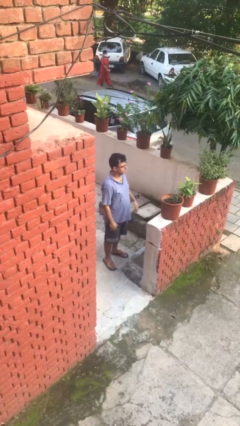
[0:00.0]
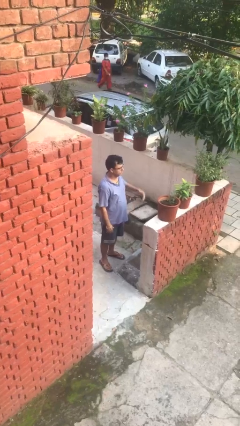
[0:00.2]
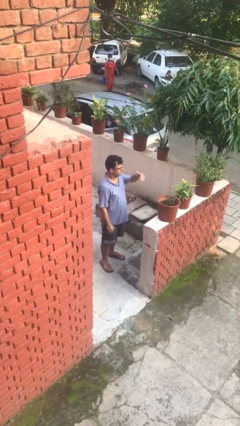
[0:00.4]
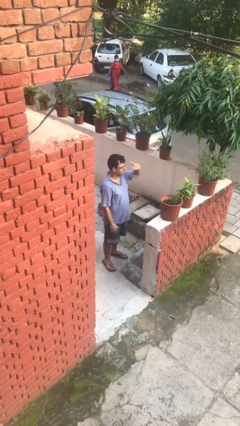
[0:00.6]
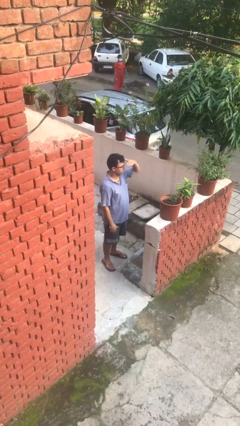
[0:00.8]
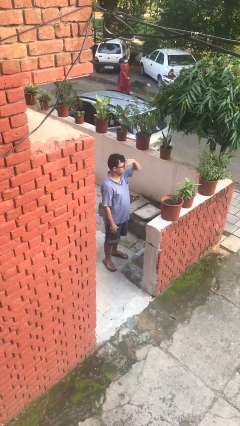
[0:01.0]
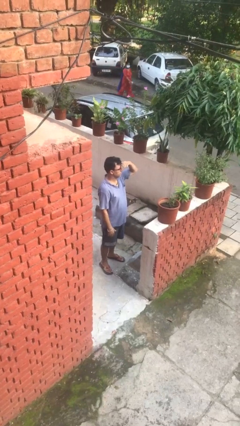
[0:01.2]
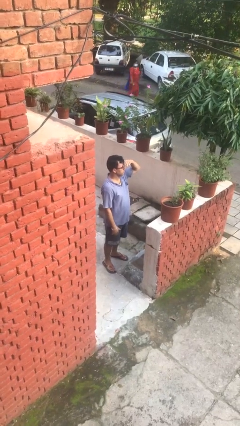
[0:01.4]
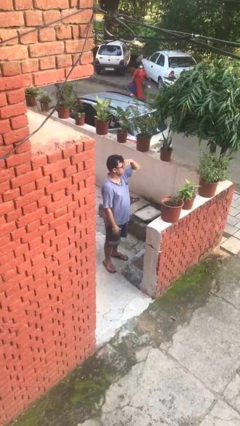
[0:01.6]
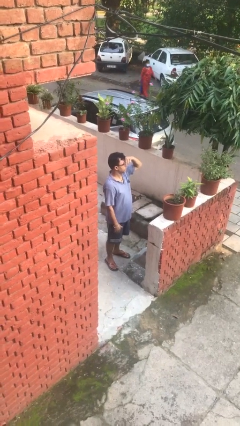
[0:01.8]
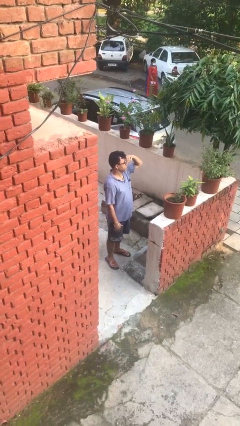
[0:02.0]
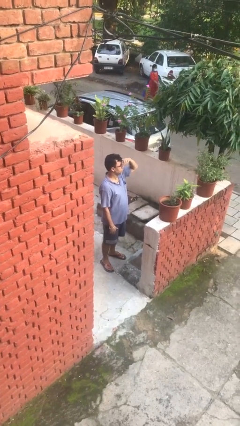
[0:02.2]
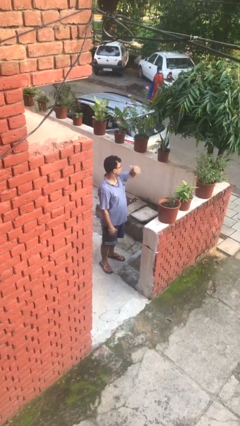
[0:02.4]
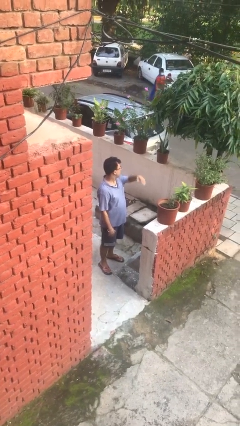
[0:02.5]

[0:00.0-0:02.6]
person shades eyes

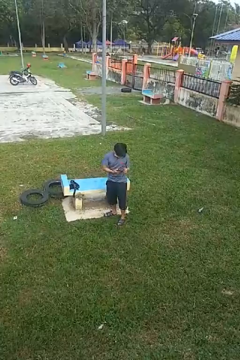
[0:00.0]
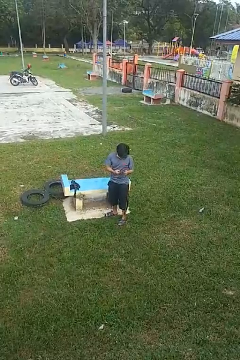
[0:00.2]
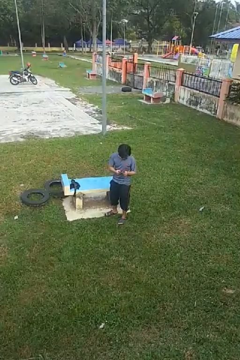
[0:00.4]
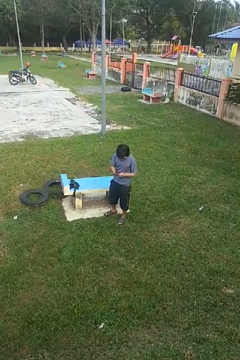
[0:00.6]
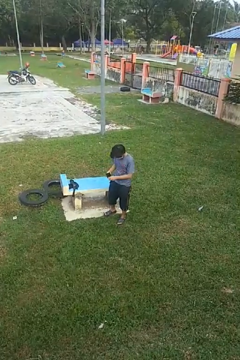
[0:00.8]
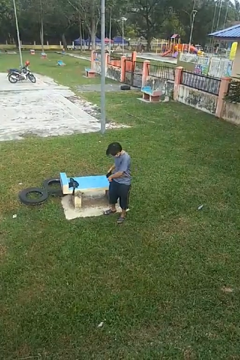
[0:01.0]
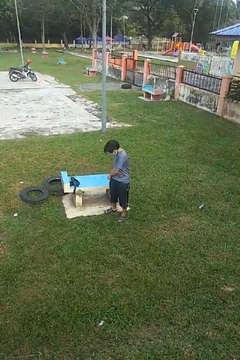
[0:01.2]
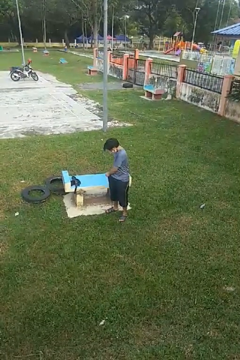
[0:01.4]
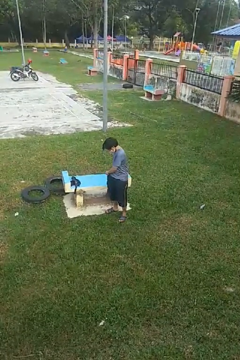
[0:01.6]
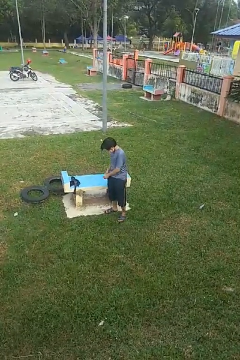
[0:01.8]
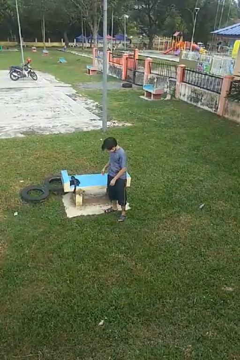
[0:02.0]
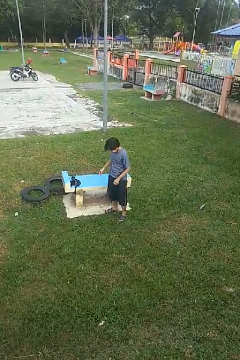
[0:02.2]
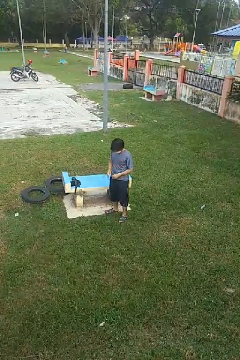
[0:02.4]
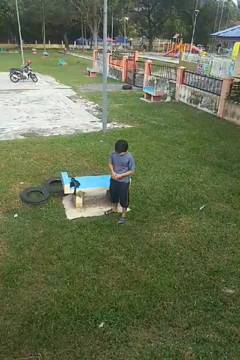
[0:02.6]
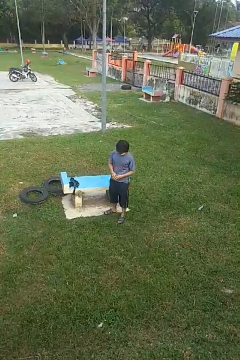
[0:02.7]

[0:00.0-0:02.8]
person puts phone into pocket

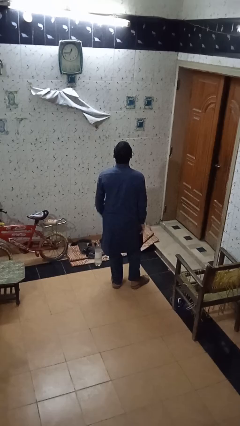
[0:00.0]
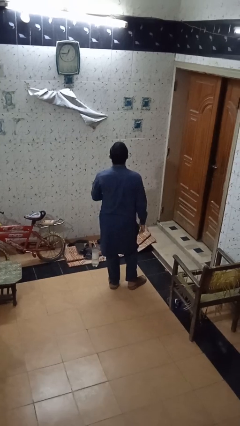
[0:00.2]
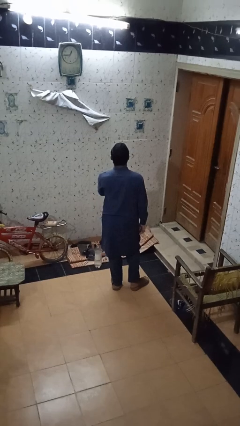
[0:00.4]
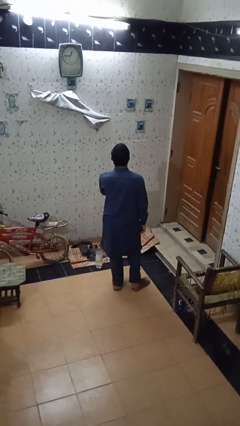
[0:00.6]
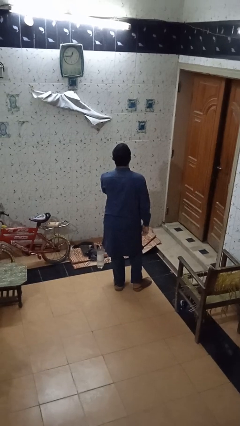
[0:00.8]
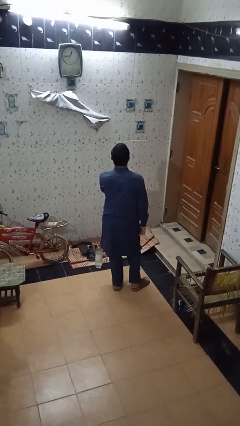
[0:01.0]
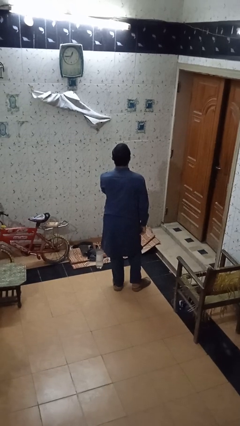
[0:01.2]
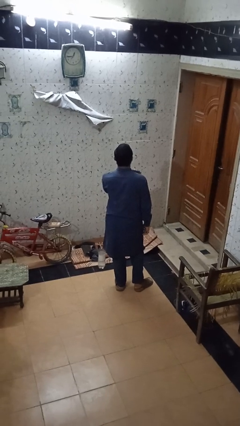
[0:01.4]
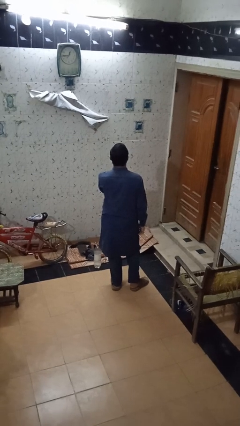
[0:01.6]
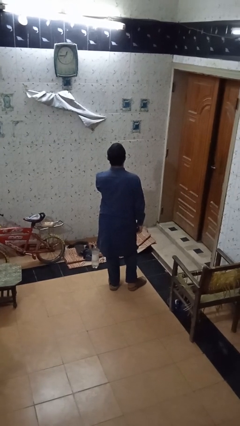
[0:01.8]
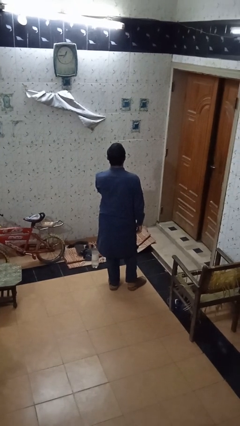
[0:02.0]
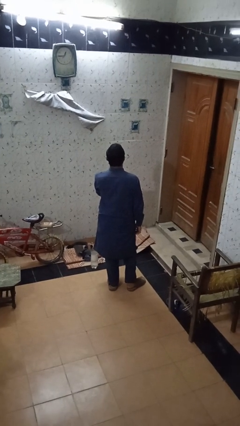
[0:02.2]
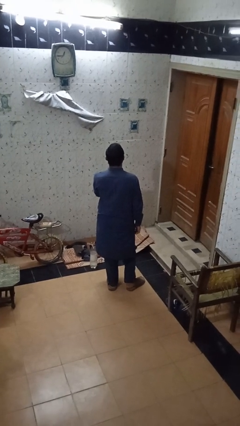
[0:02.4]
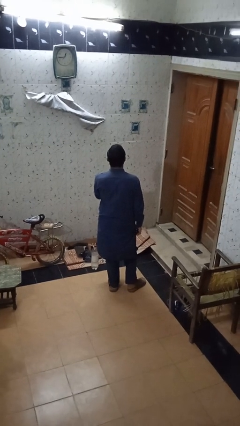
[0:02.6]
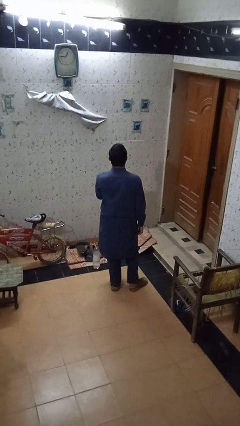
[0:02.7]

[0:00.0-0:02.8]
person drums on chest

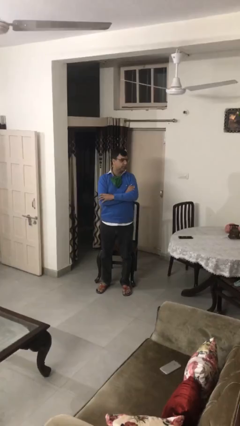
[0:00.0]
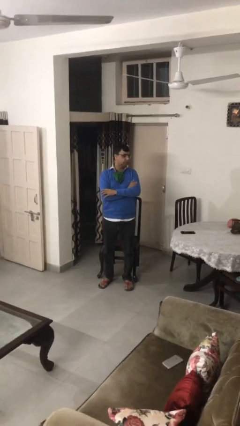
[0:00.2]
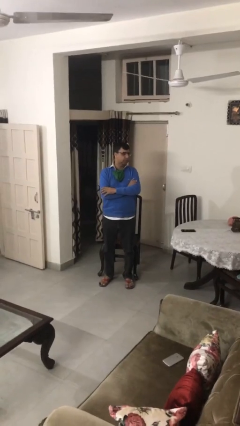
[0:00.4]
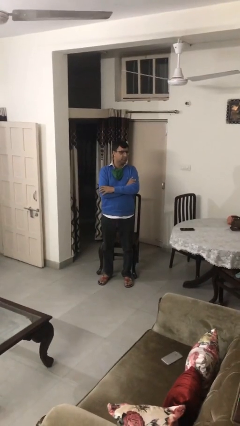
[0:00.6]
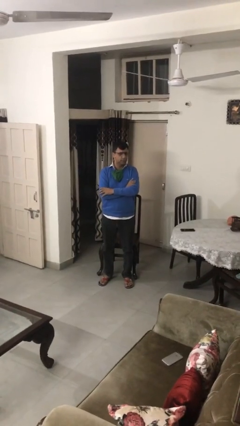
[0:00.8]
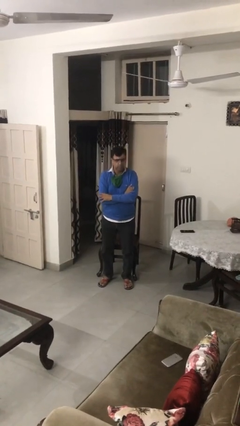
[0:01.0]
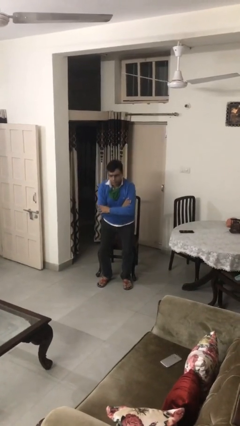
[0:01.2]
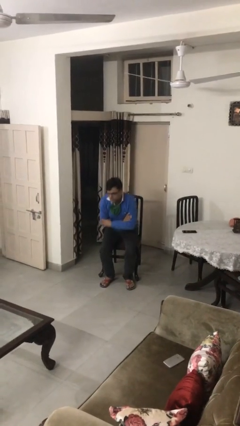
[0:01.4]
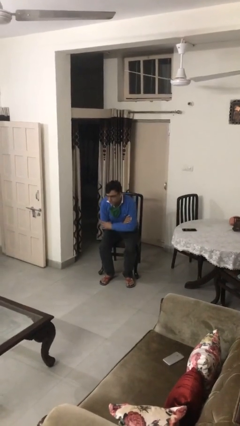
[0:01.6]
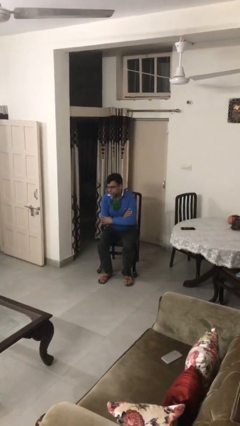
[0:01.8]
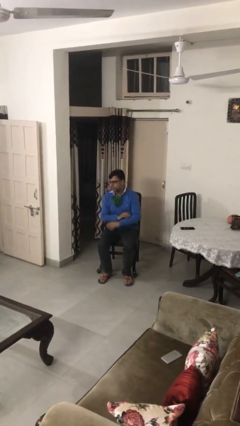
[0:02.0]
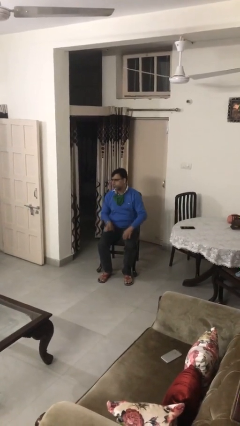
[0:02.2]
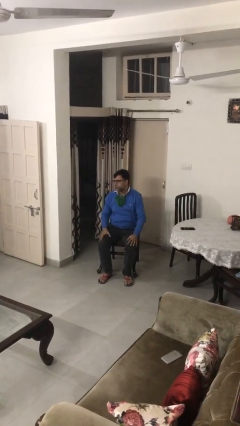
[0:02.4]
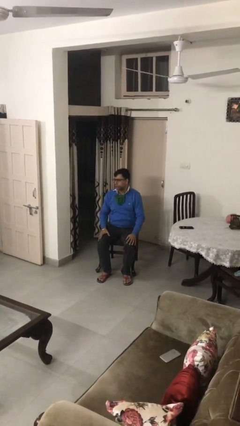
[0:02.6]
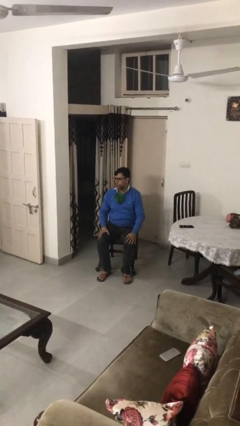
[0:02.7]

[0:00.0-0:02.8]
person sits down

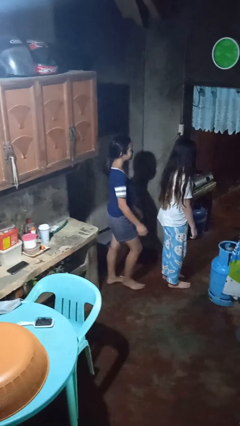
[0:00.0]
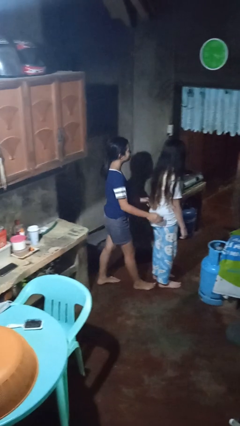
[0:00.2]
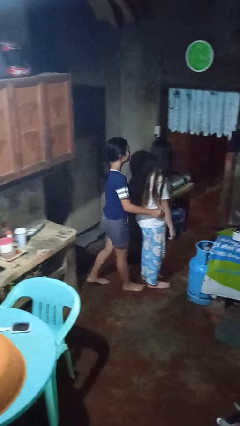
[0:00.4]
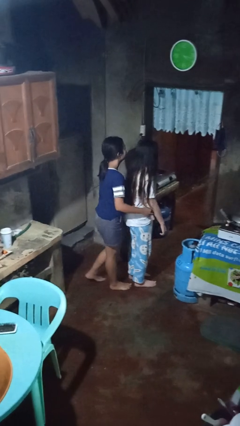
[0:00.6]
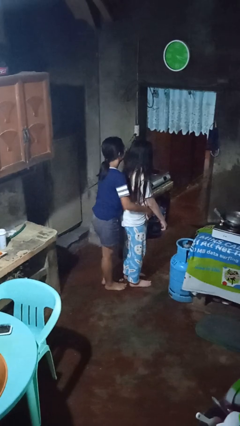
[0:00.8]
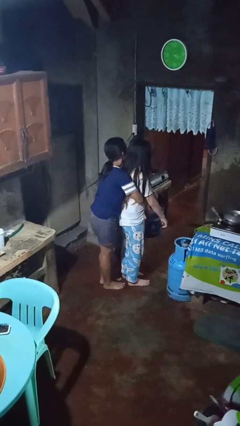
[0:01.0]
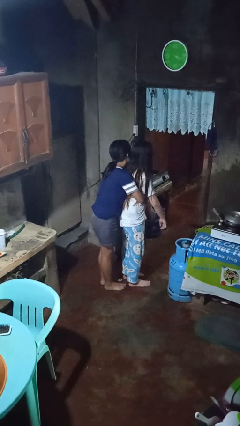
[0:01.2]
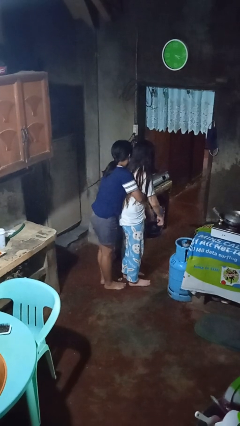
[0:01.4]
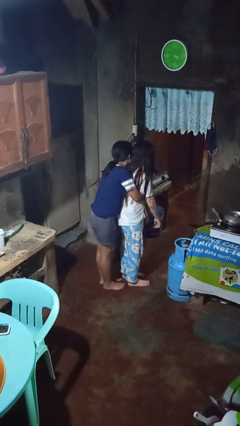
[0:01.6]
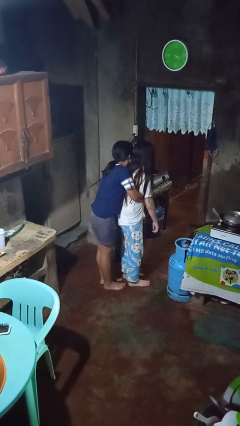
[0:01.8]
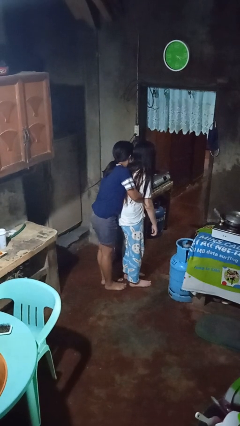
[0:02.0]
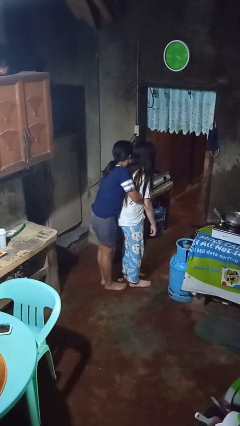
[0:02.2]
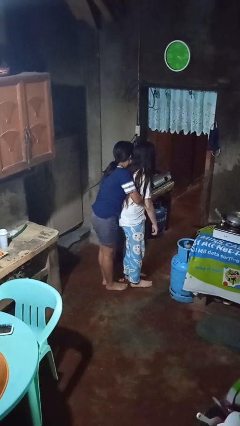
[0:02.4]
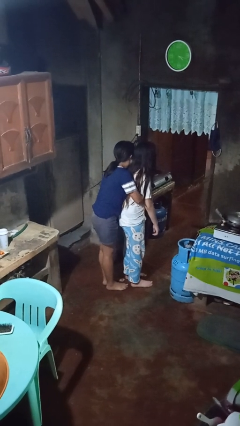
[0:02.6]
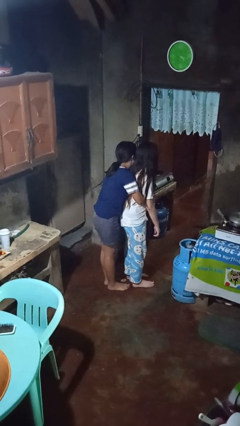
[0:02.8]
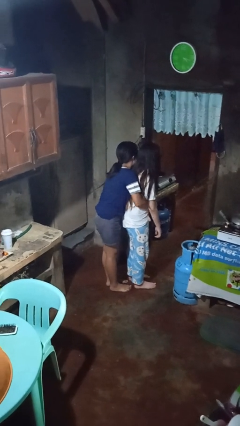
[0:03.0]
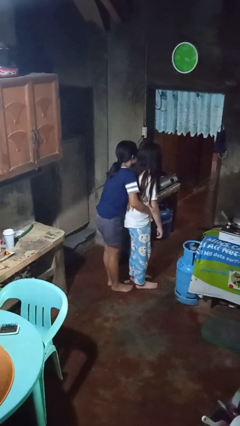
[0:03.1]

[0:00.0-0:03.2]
person hugs person from behind

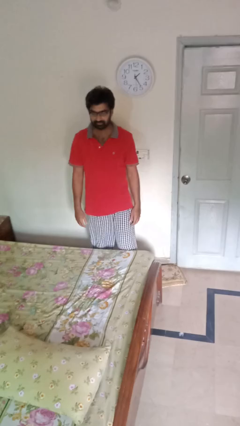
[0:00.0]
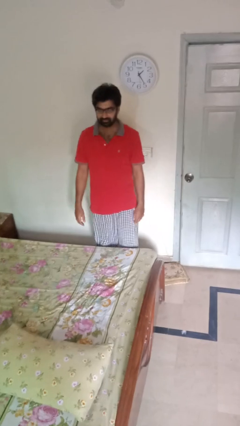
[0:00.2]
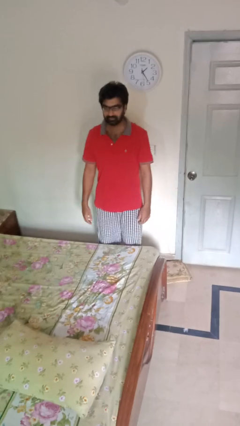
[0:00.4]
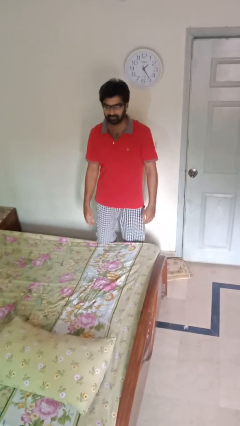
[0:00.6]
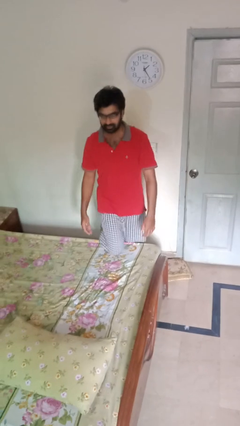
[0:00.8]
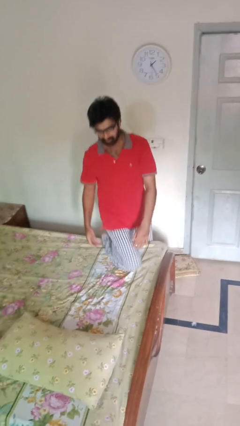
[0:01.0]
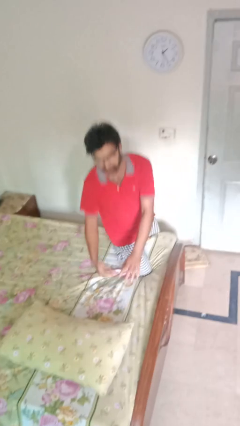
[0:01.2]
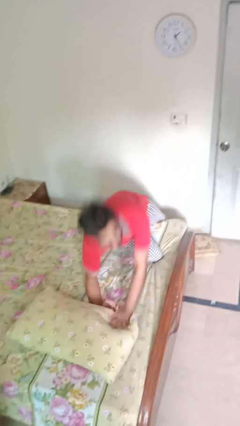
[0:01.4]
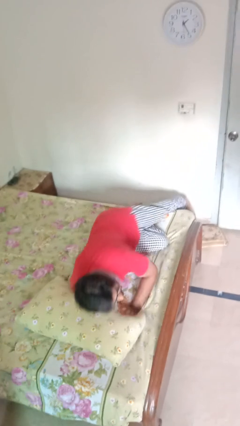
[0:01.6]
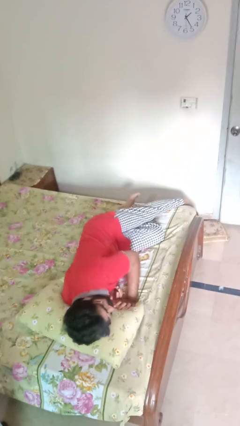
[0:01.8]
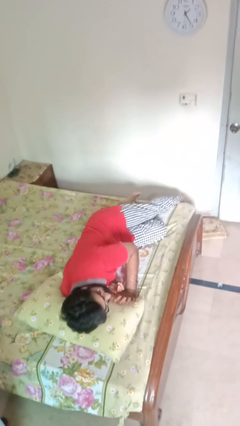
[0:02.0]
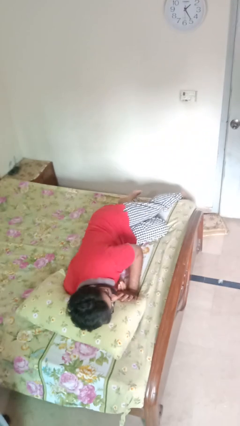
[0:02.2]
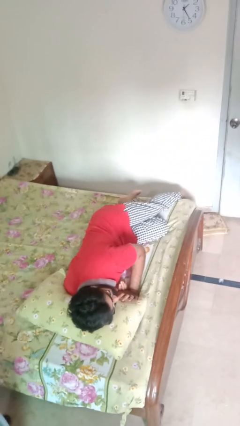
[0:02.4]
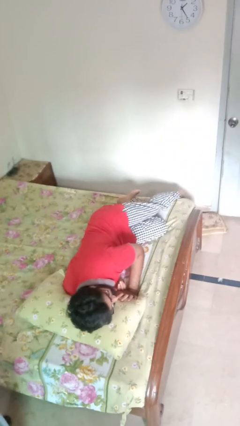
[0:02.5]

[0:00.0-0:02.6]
person lies down on bed

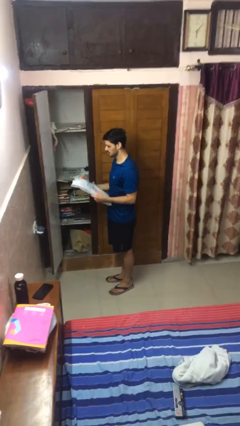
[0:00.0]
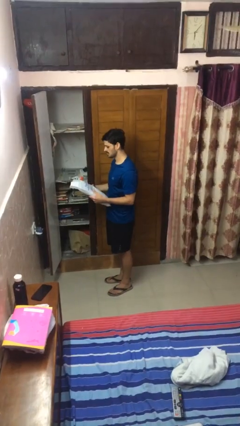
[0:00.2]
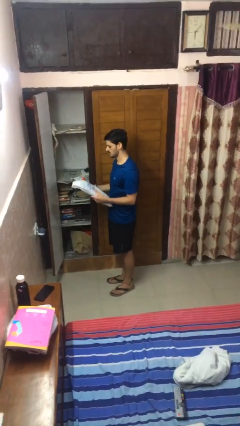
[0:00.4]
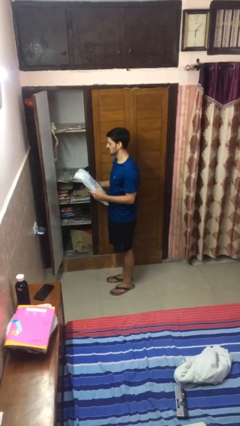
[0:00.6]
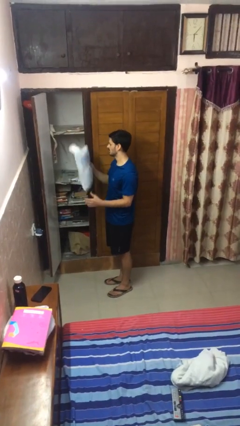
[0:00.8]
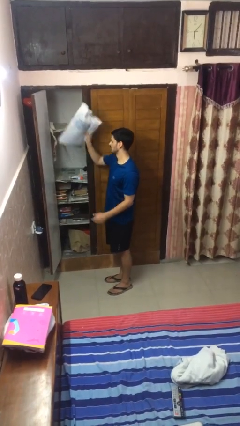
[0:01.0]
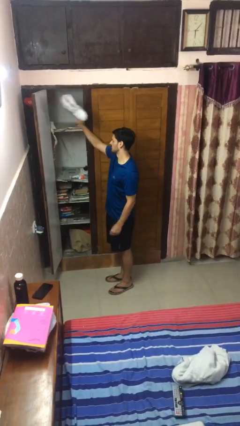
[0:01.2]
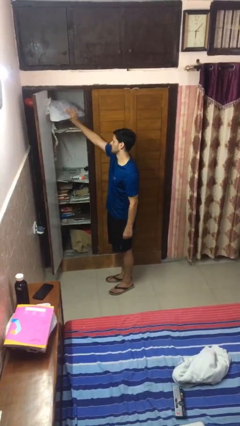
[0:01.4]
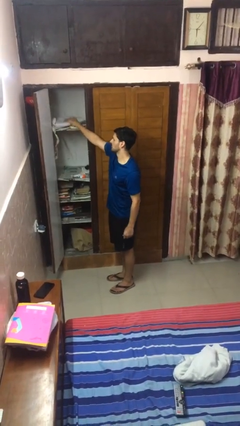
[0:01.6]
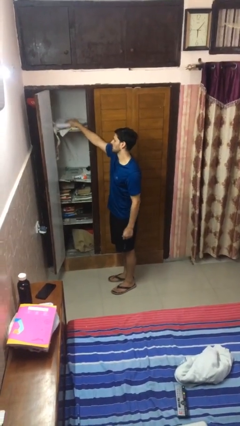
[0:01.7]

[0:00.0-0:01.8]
person puts down object on shelf
